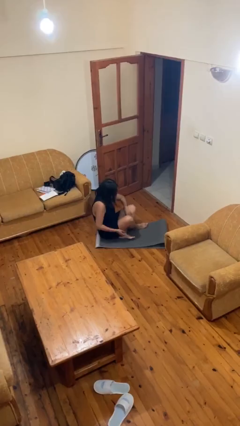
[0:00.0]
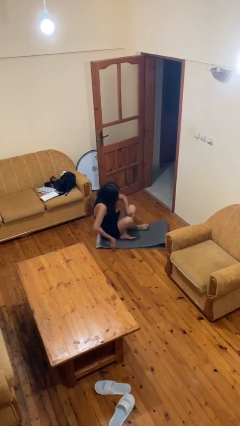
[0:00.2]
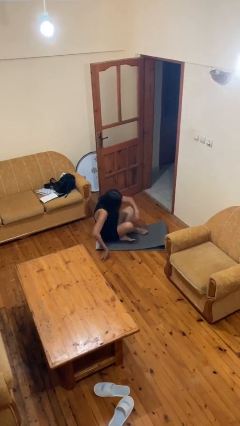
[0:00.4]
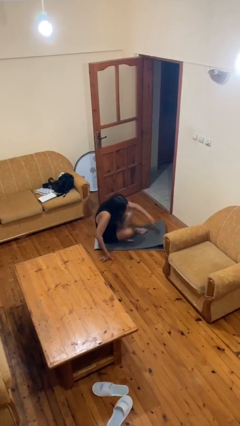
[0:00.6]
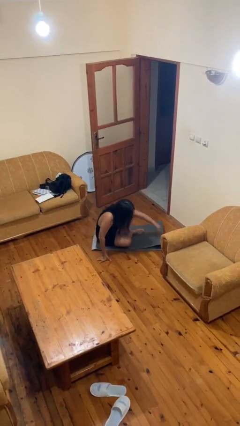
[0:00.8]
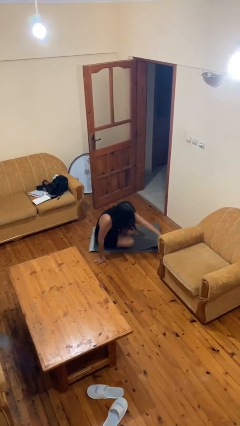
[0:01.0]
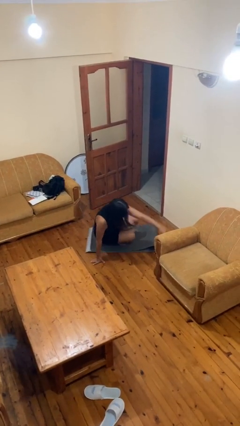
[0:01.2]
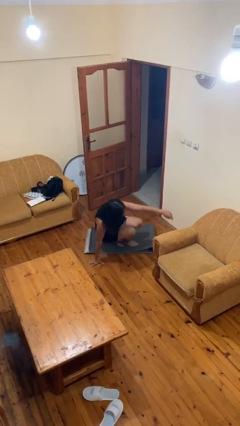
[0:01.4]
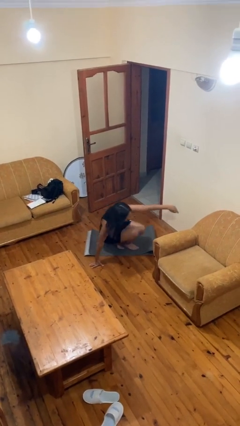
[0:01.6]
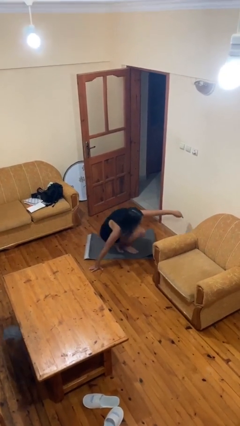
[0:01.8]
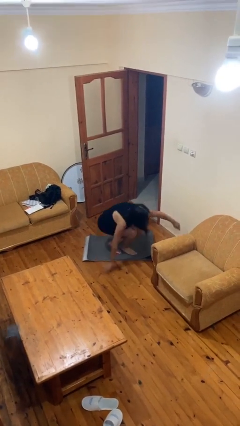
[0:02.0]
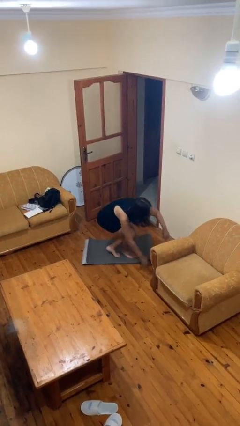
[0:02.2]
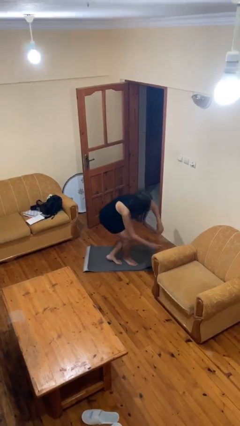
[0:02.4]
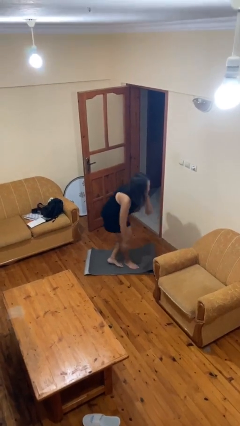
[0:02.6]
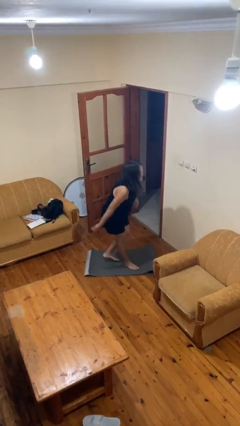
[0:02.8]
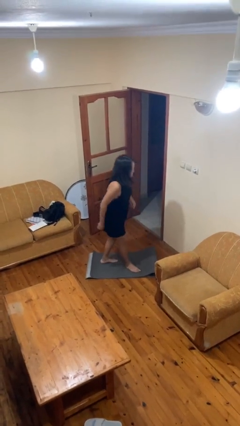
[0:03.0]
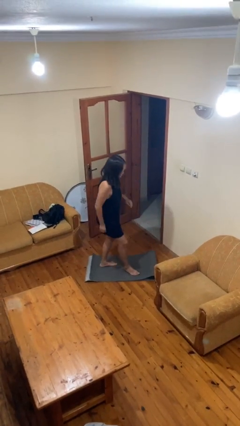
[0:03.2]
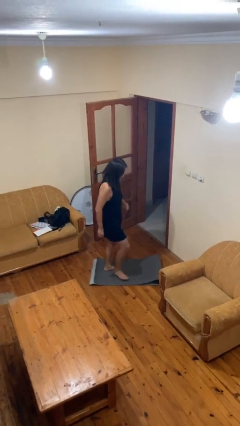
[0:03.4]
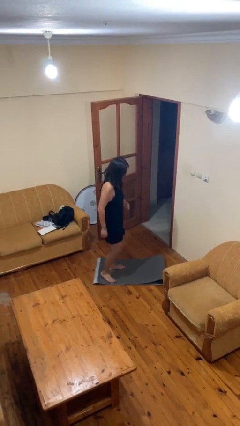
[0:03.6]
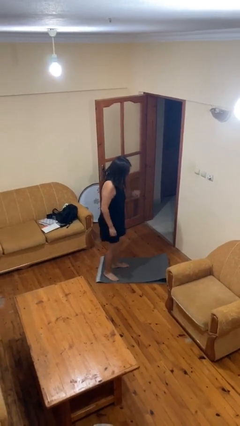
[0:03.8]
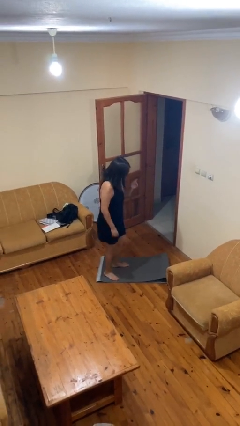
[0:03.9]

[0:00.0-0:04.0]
person stands up from floor

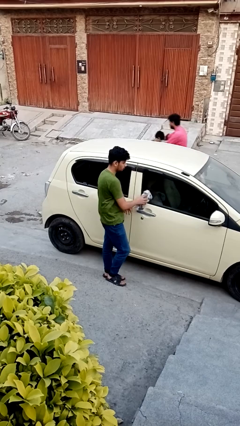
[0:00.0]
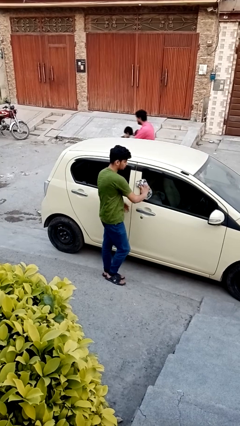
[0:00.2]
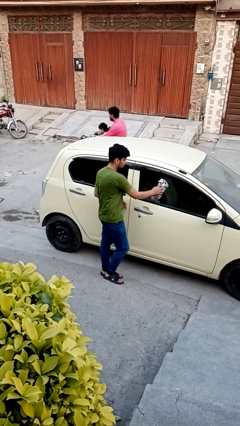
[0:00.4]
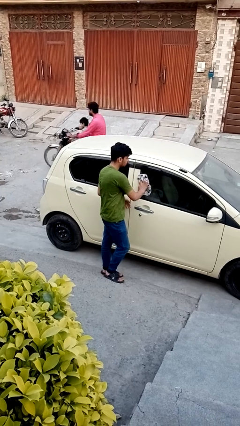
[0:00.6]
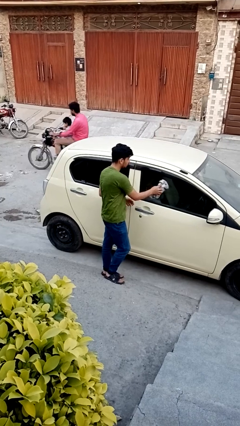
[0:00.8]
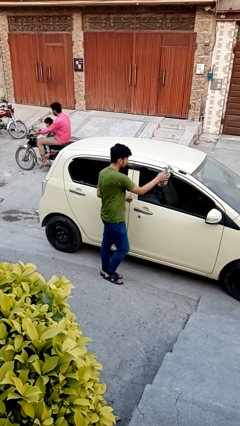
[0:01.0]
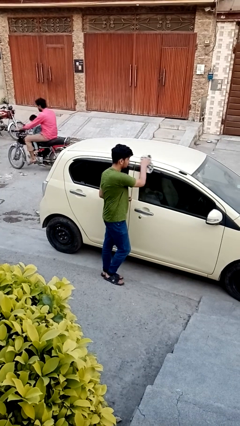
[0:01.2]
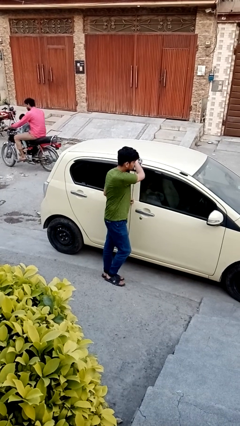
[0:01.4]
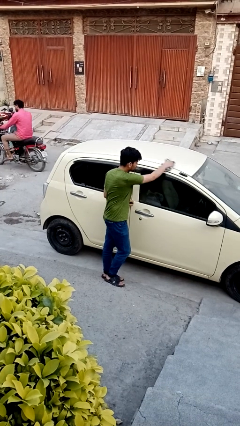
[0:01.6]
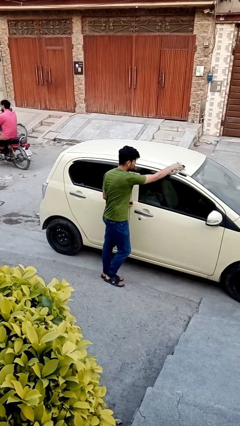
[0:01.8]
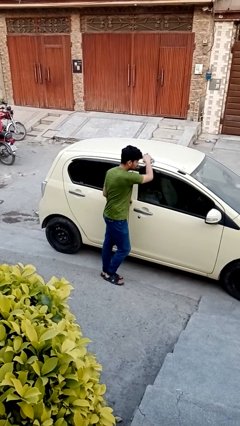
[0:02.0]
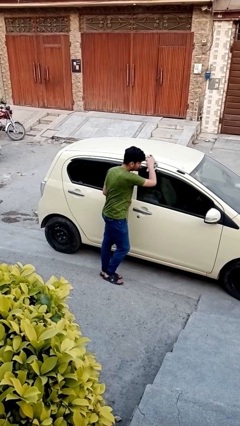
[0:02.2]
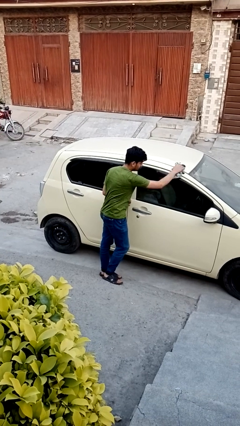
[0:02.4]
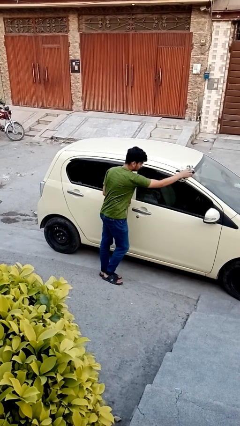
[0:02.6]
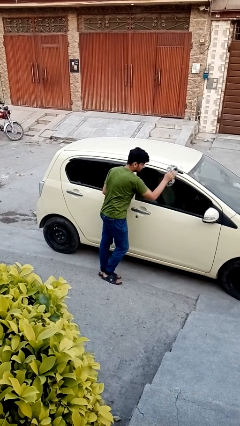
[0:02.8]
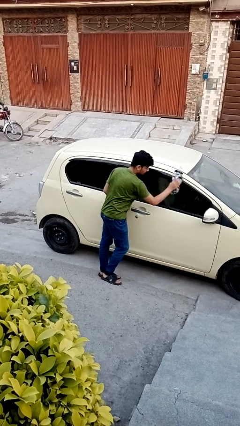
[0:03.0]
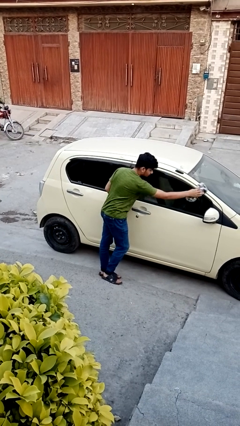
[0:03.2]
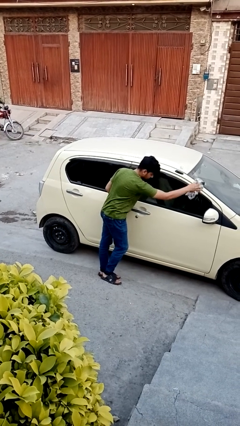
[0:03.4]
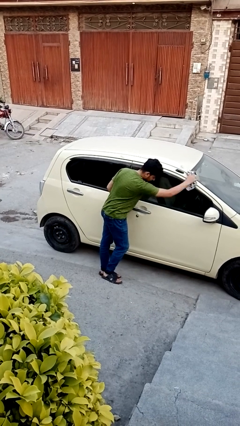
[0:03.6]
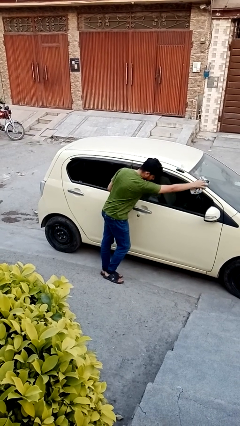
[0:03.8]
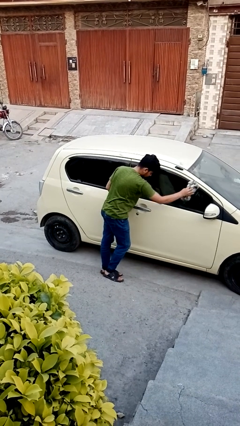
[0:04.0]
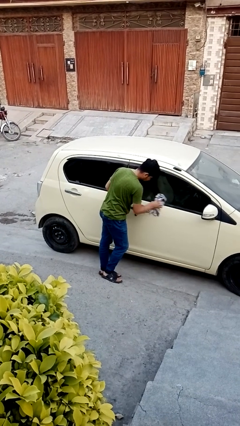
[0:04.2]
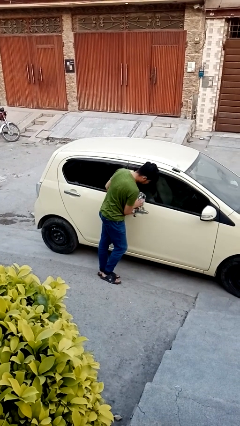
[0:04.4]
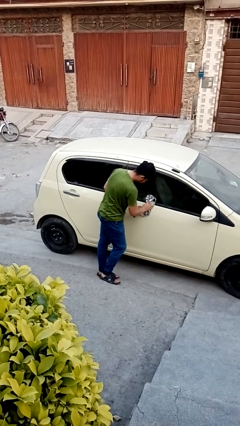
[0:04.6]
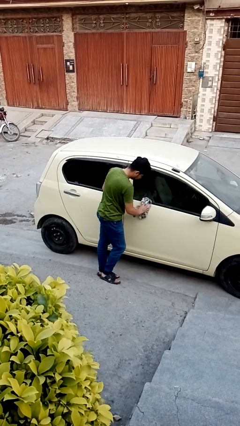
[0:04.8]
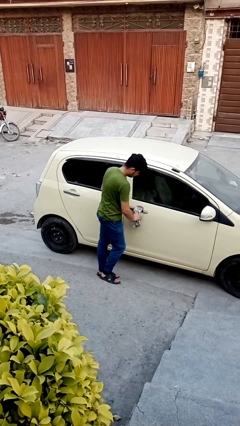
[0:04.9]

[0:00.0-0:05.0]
person polishes car with rag

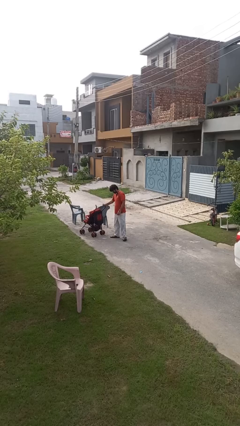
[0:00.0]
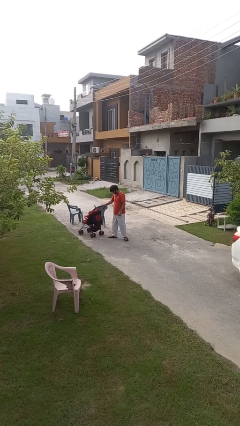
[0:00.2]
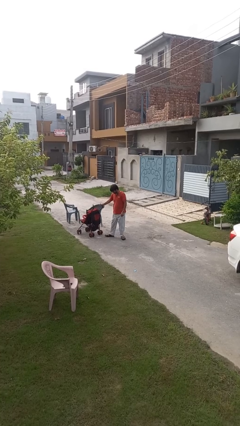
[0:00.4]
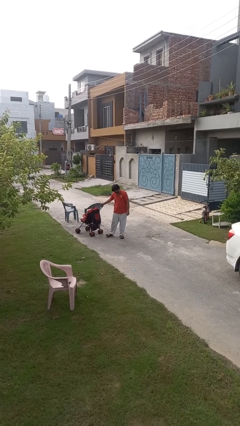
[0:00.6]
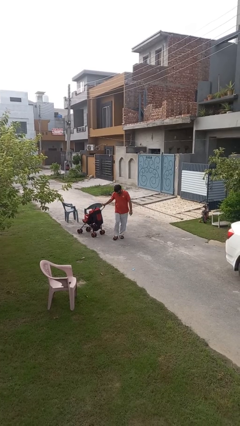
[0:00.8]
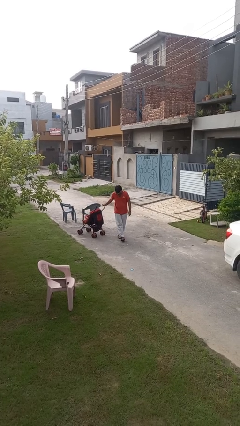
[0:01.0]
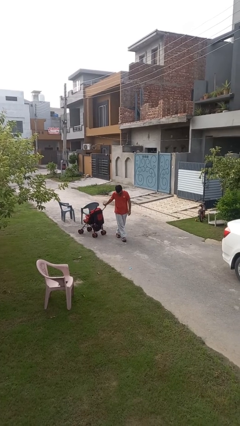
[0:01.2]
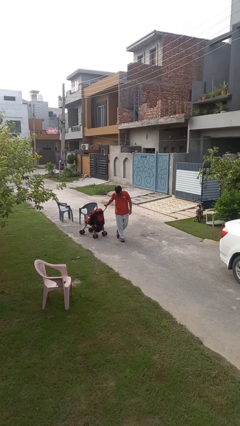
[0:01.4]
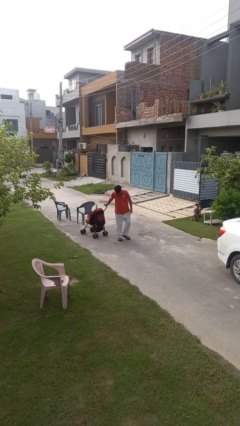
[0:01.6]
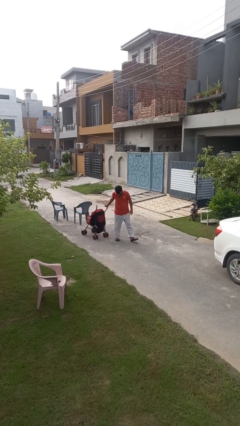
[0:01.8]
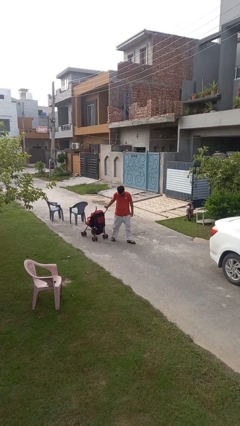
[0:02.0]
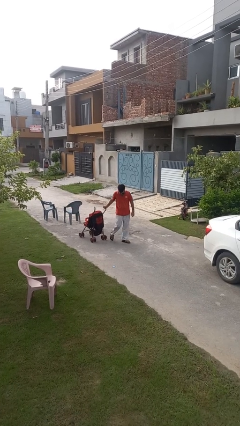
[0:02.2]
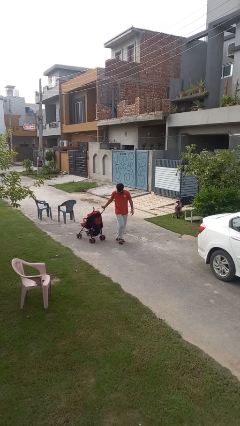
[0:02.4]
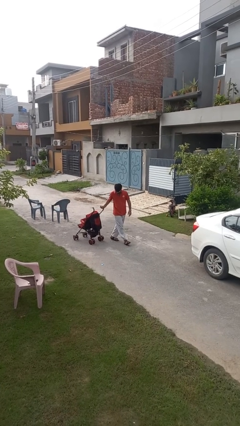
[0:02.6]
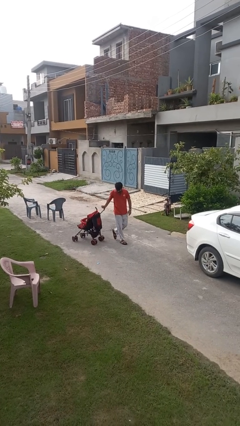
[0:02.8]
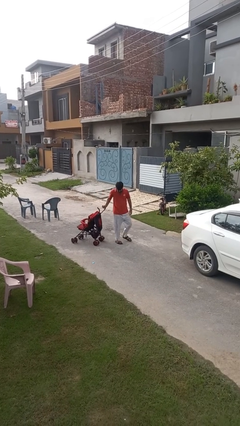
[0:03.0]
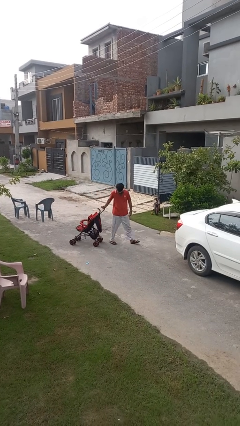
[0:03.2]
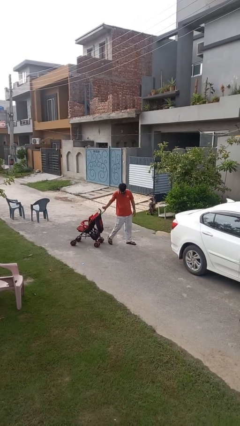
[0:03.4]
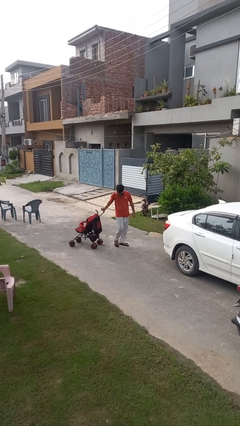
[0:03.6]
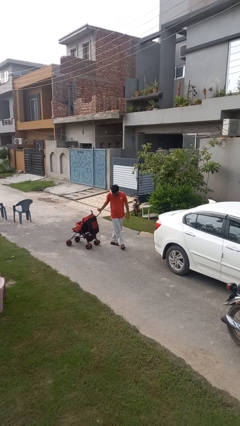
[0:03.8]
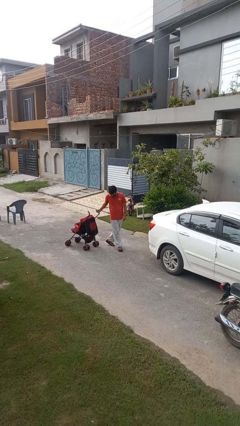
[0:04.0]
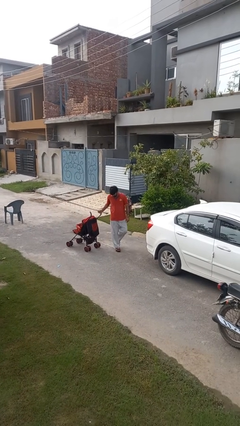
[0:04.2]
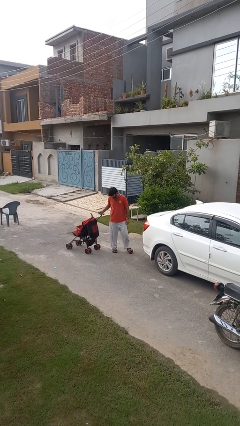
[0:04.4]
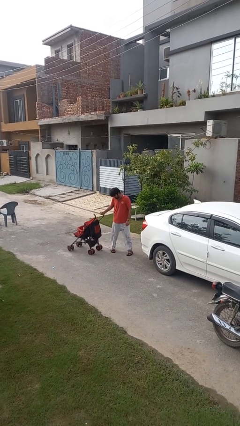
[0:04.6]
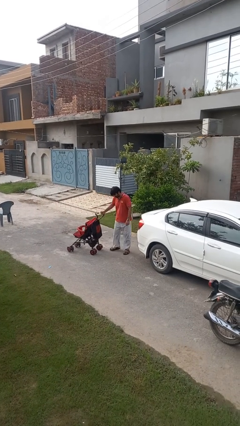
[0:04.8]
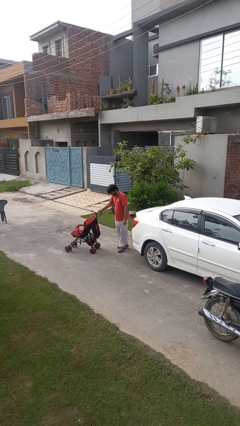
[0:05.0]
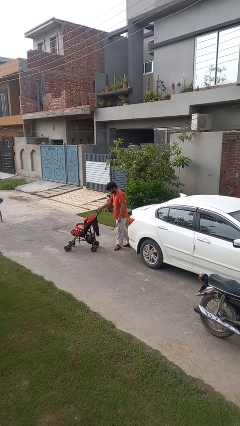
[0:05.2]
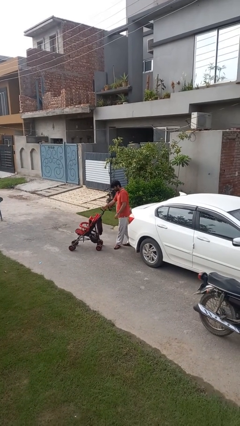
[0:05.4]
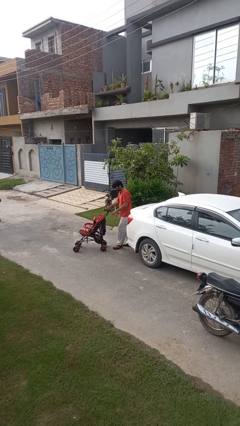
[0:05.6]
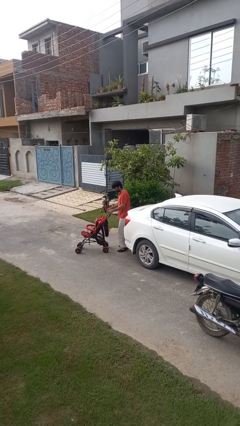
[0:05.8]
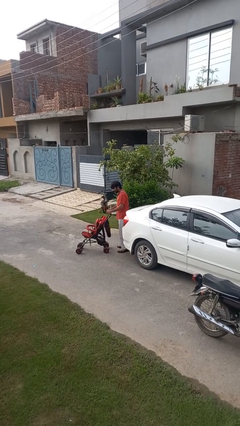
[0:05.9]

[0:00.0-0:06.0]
person pulls wheeled cart

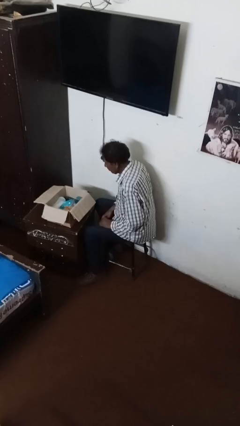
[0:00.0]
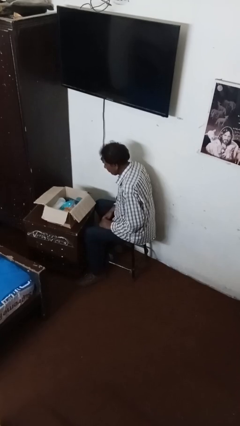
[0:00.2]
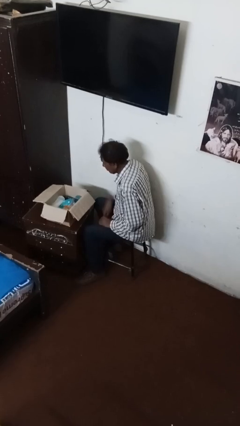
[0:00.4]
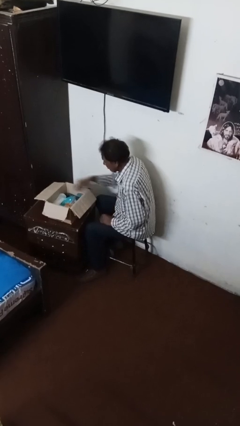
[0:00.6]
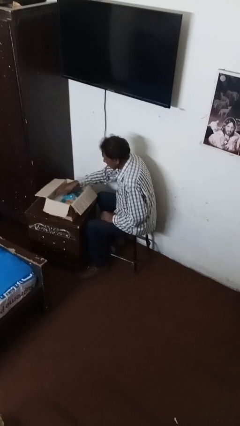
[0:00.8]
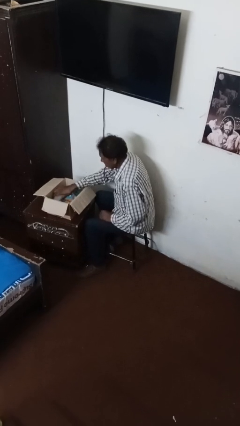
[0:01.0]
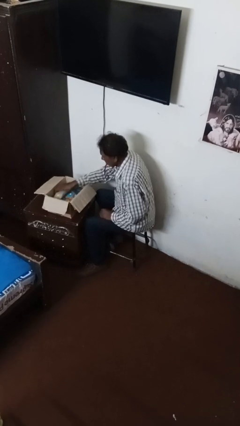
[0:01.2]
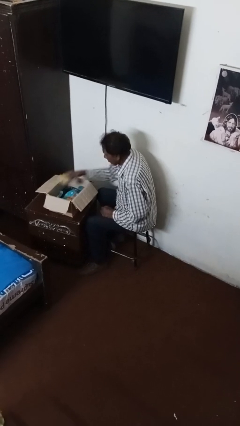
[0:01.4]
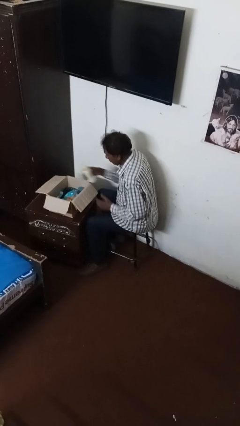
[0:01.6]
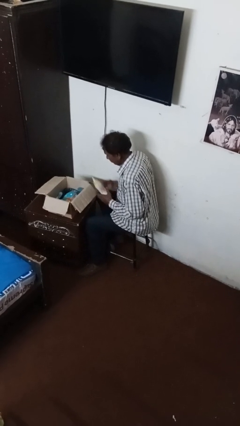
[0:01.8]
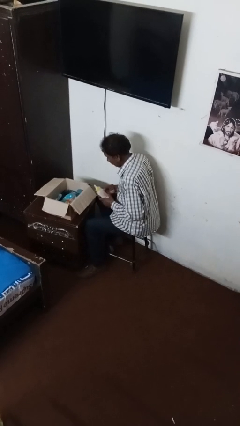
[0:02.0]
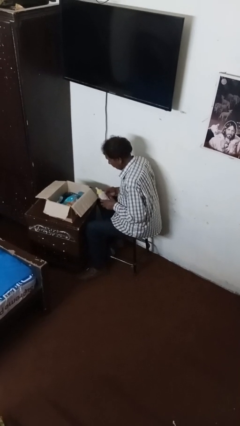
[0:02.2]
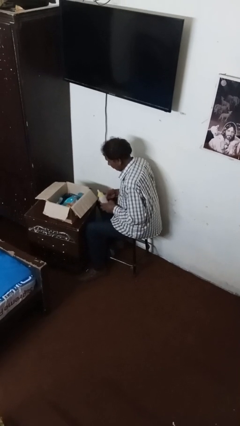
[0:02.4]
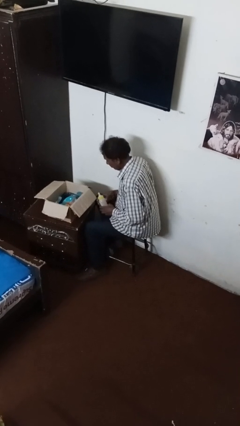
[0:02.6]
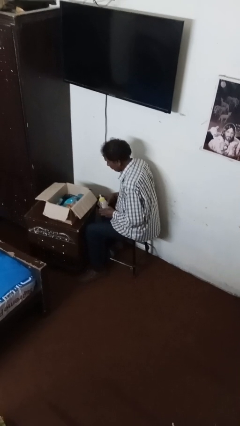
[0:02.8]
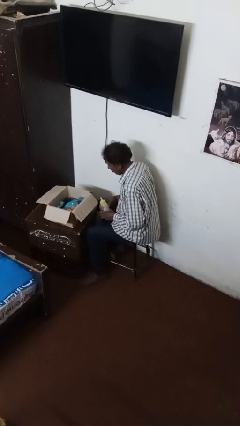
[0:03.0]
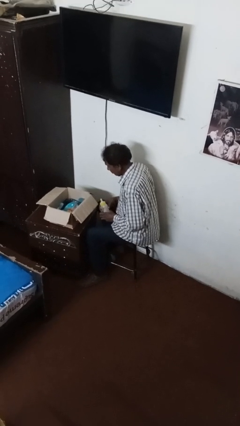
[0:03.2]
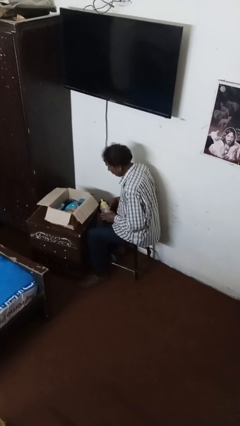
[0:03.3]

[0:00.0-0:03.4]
person searches in box
